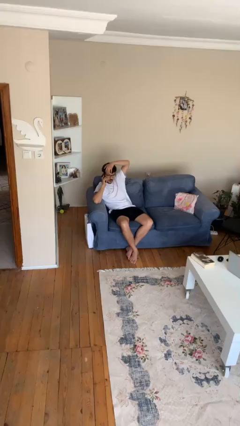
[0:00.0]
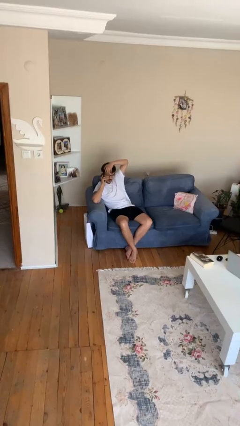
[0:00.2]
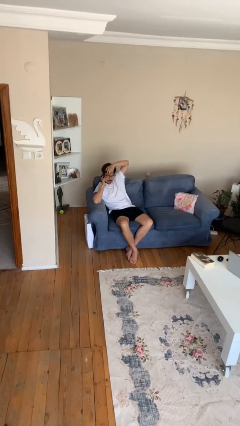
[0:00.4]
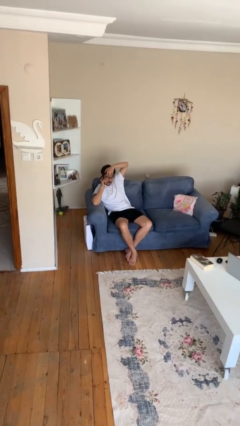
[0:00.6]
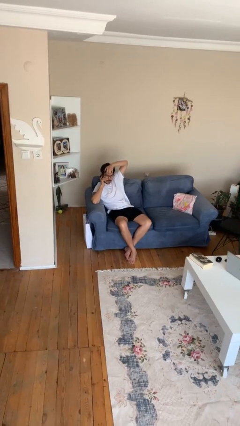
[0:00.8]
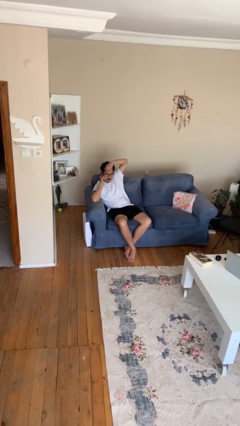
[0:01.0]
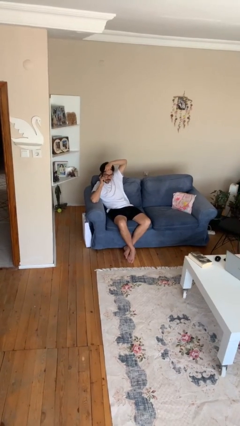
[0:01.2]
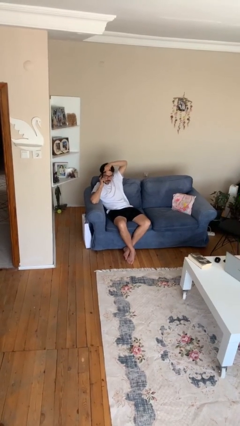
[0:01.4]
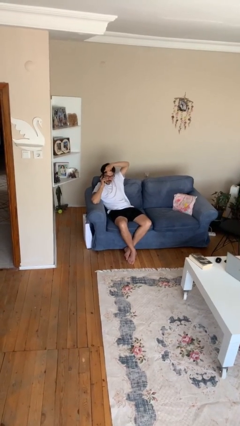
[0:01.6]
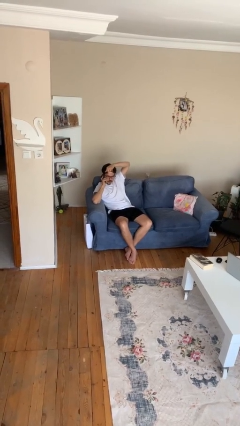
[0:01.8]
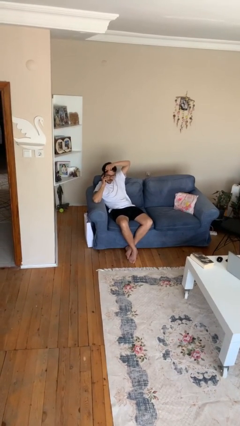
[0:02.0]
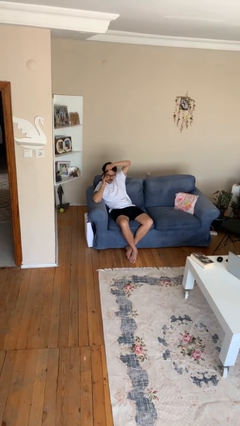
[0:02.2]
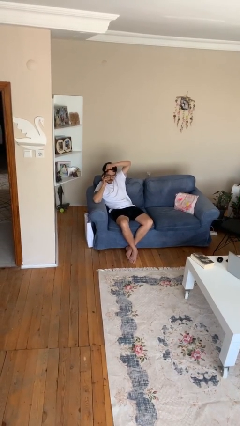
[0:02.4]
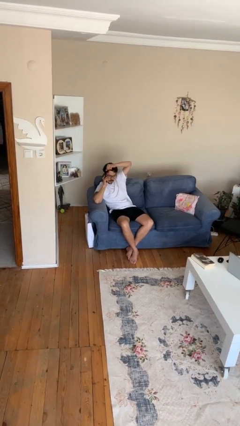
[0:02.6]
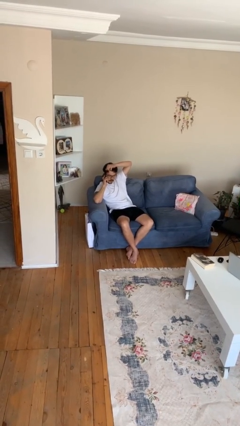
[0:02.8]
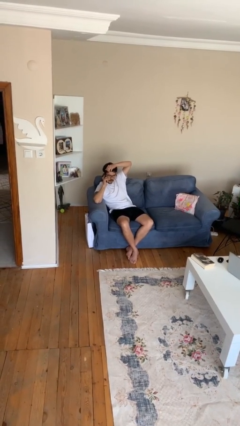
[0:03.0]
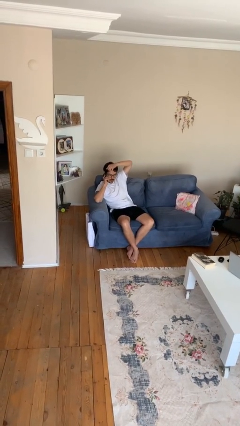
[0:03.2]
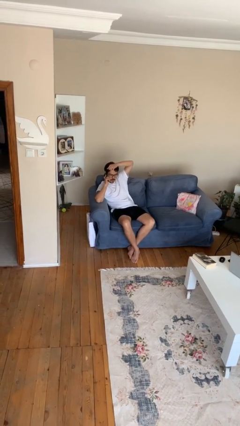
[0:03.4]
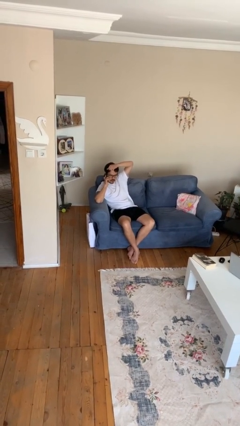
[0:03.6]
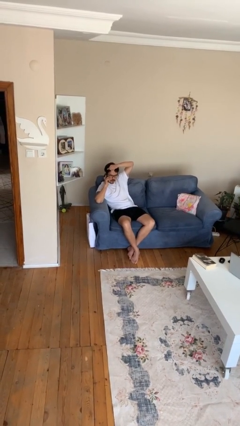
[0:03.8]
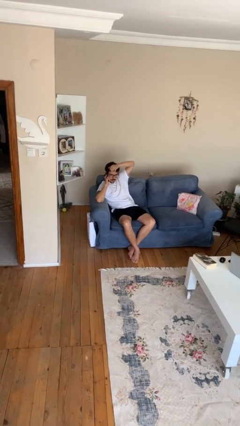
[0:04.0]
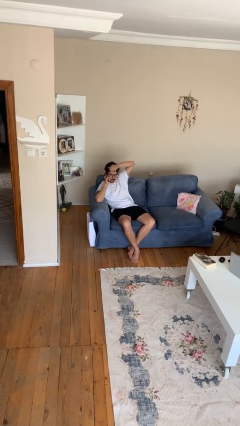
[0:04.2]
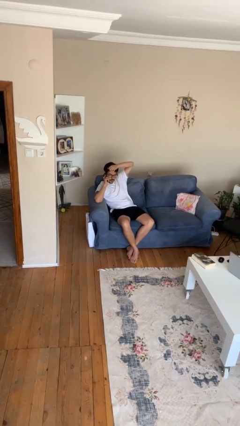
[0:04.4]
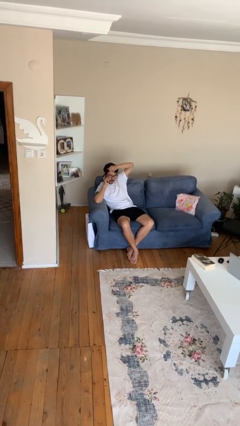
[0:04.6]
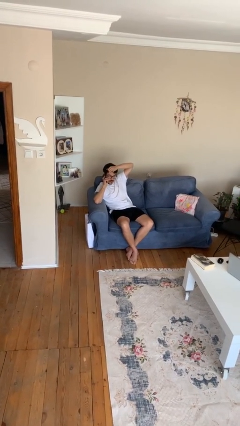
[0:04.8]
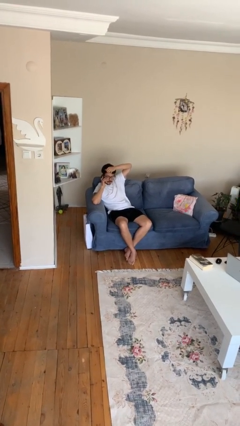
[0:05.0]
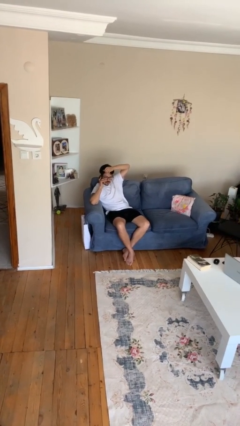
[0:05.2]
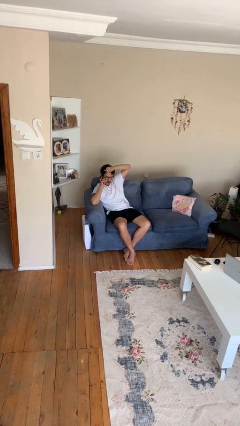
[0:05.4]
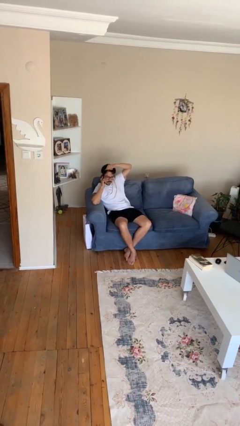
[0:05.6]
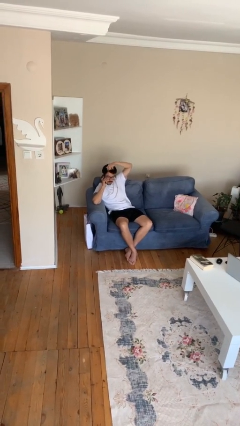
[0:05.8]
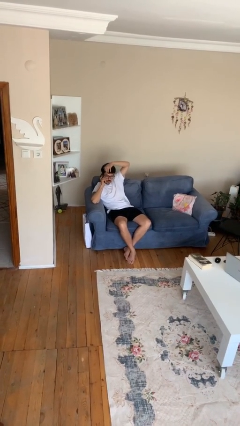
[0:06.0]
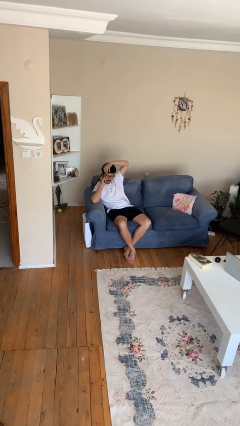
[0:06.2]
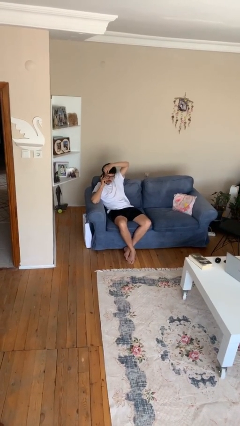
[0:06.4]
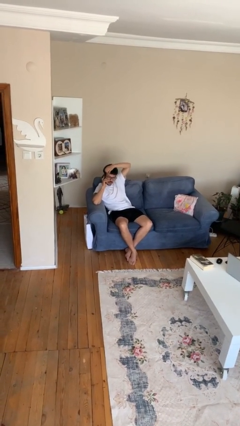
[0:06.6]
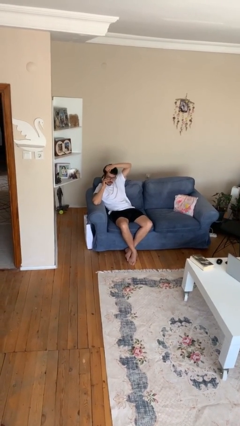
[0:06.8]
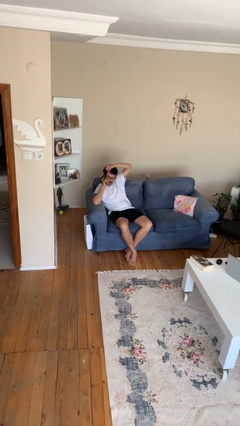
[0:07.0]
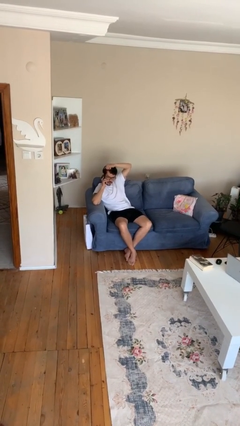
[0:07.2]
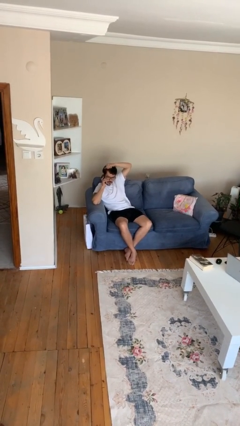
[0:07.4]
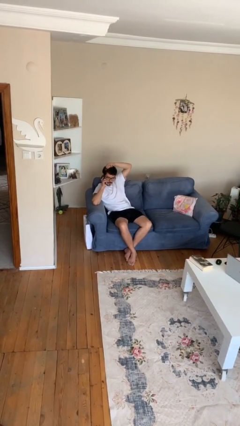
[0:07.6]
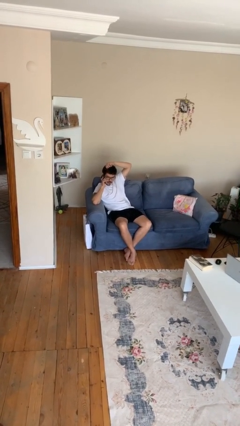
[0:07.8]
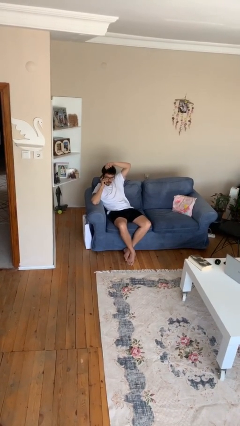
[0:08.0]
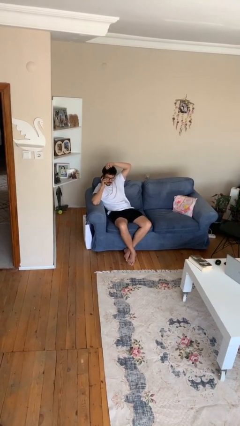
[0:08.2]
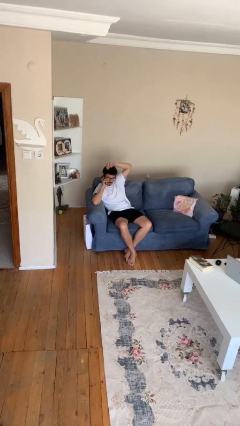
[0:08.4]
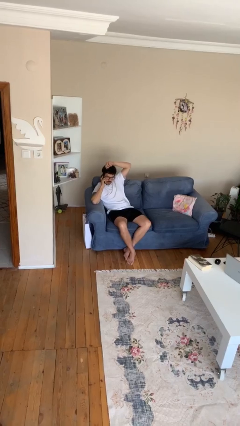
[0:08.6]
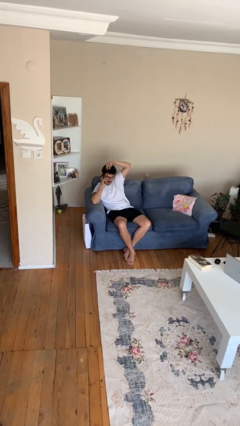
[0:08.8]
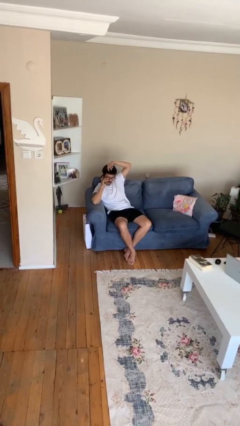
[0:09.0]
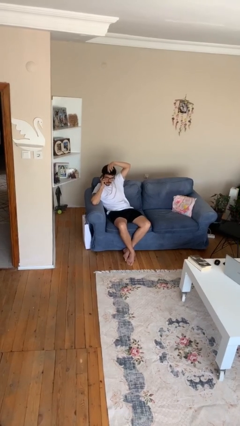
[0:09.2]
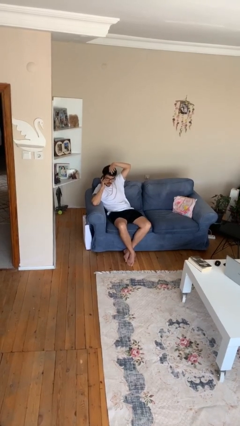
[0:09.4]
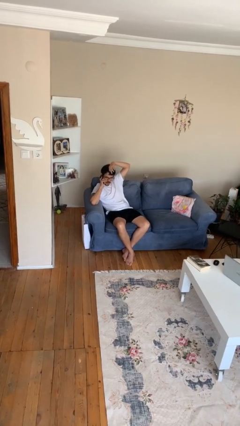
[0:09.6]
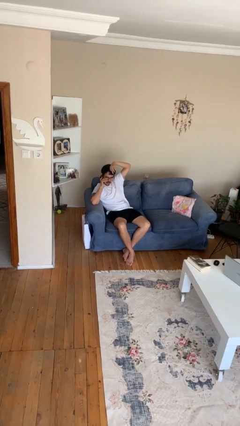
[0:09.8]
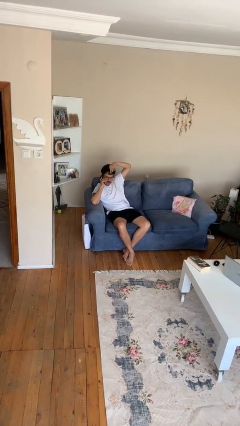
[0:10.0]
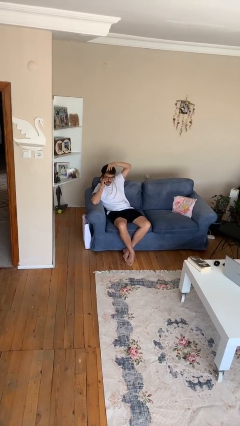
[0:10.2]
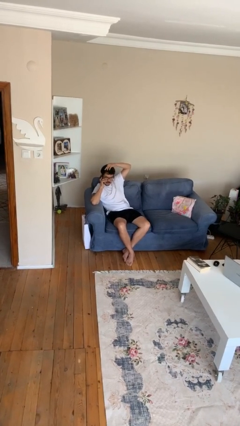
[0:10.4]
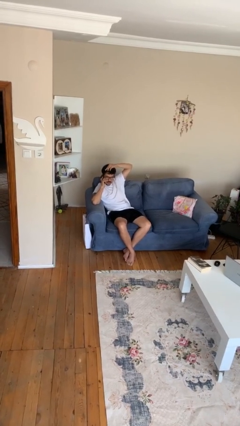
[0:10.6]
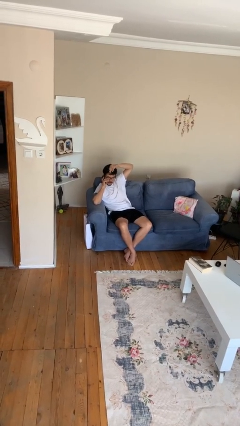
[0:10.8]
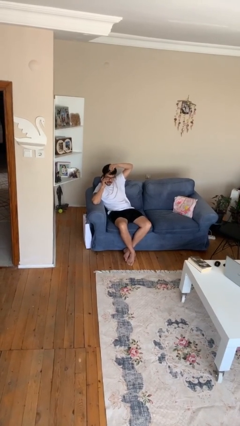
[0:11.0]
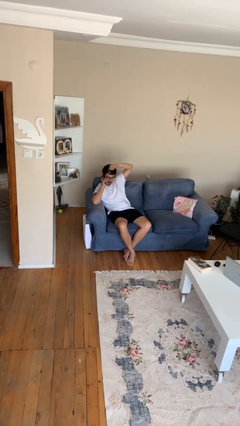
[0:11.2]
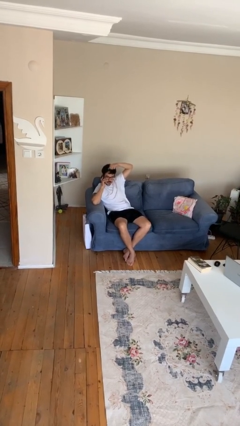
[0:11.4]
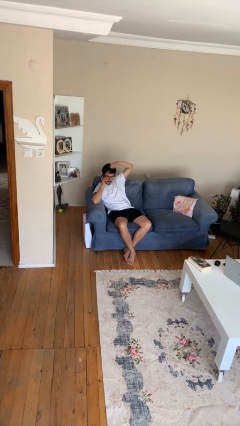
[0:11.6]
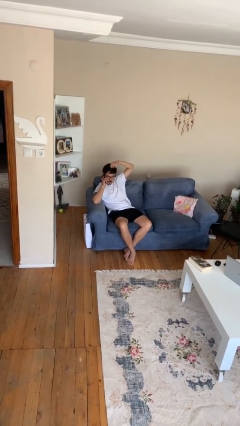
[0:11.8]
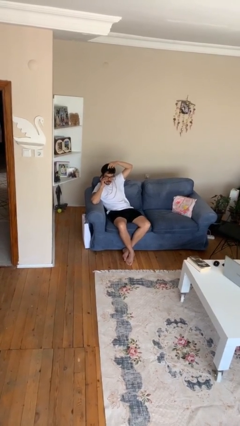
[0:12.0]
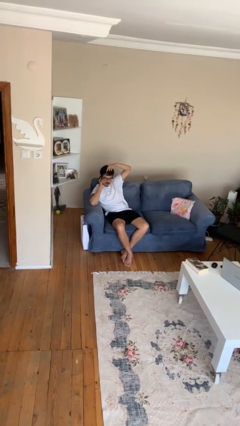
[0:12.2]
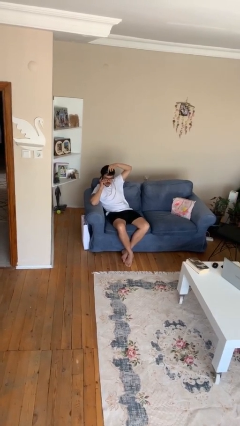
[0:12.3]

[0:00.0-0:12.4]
person talks on phone

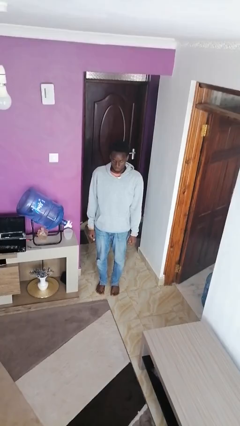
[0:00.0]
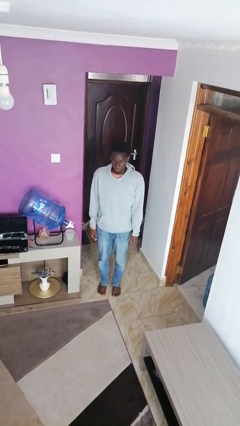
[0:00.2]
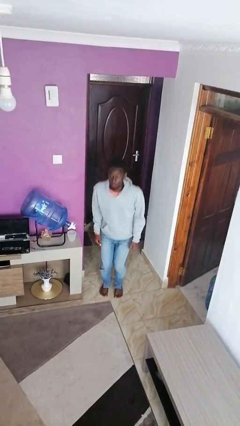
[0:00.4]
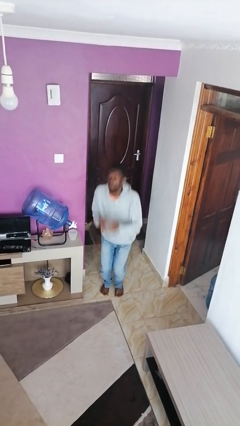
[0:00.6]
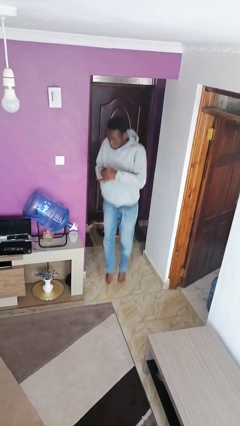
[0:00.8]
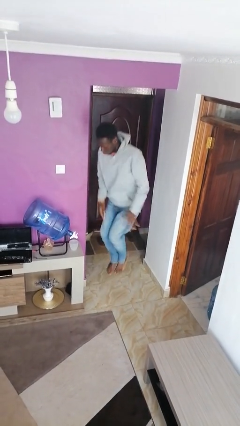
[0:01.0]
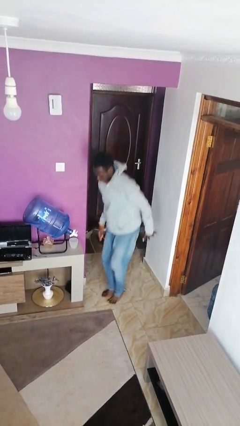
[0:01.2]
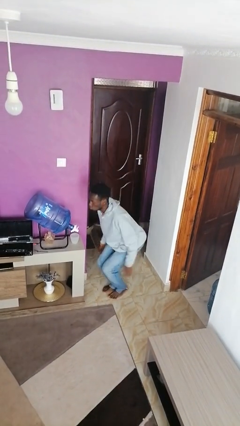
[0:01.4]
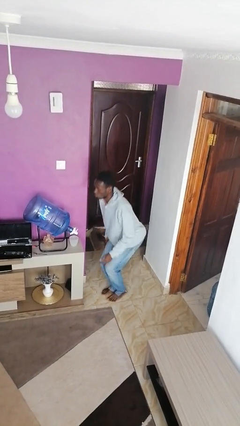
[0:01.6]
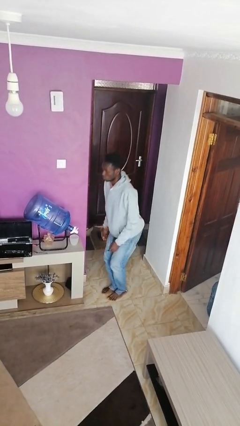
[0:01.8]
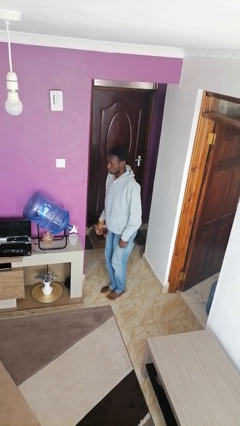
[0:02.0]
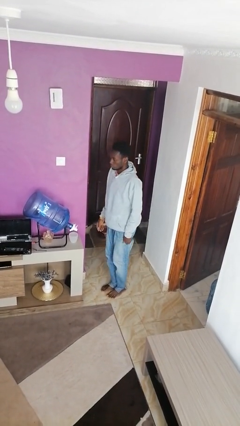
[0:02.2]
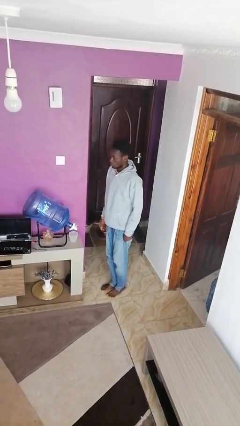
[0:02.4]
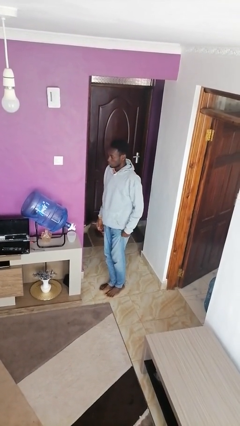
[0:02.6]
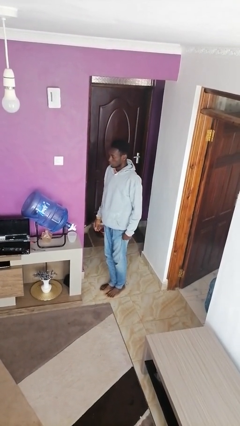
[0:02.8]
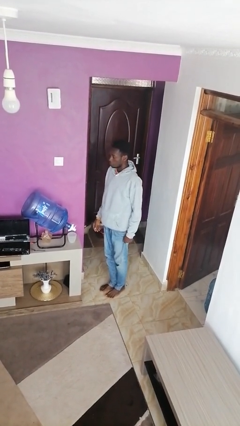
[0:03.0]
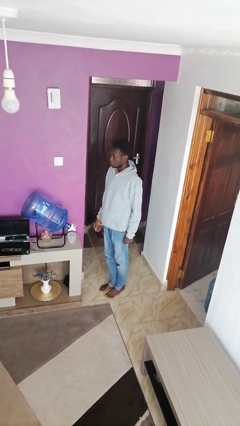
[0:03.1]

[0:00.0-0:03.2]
person jumps

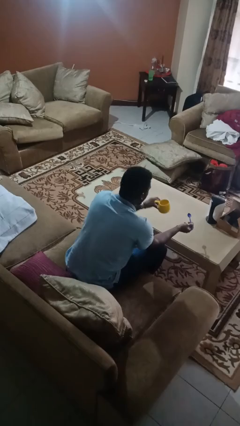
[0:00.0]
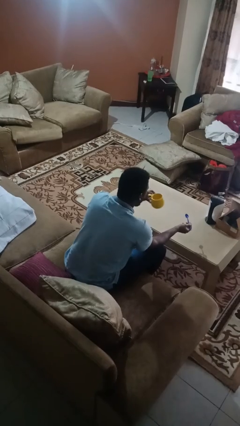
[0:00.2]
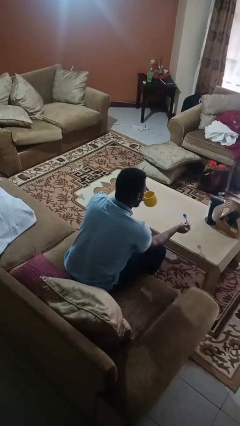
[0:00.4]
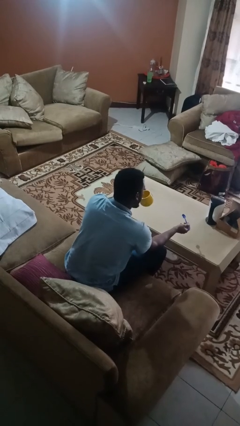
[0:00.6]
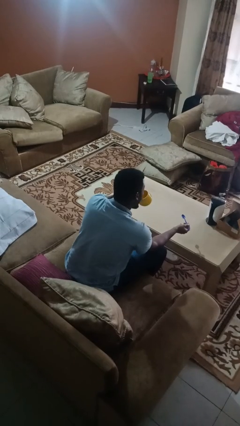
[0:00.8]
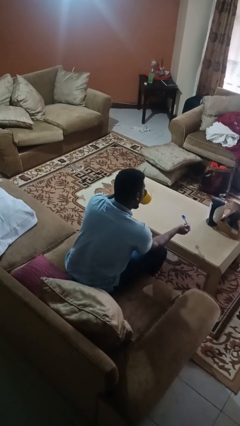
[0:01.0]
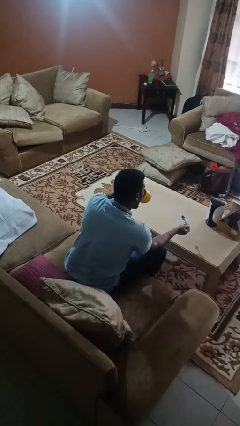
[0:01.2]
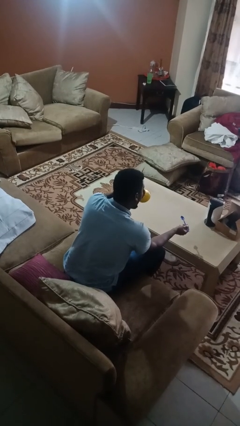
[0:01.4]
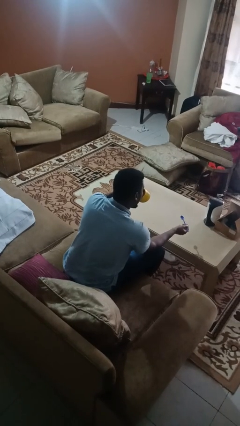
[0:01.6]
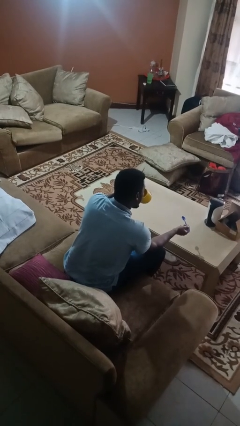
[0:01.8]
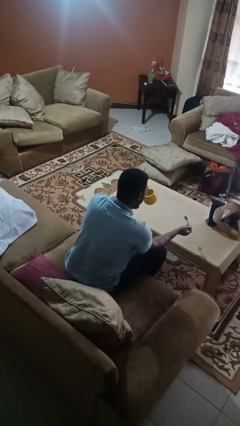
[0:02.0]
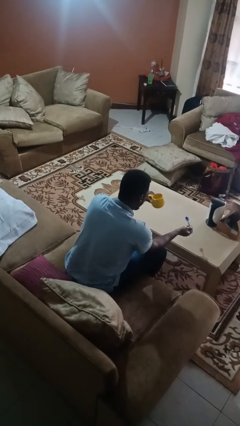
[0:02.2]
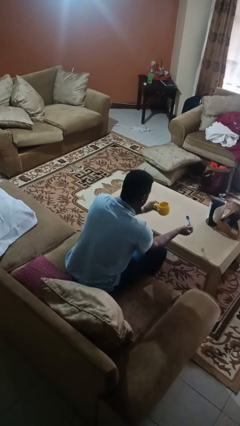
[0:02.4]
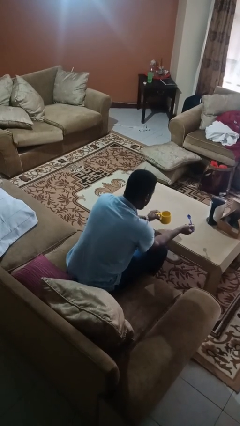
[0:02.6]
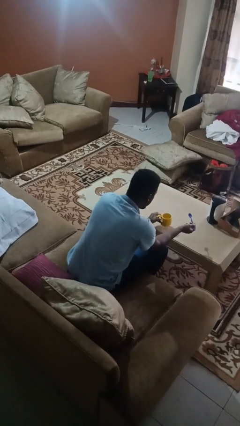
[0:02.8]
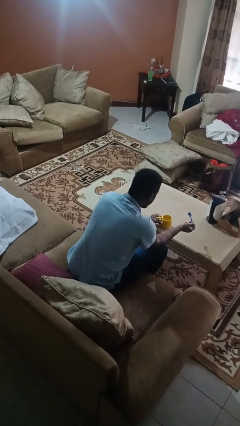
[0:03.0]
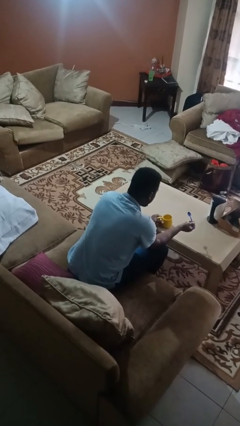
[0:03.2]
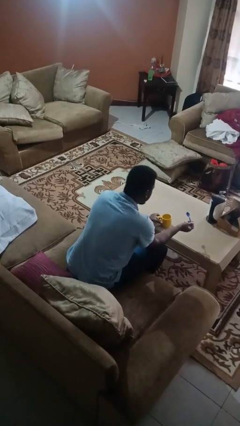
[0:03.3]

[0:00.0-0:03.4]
person drinks from mug
